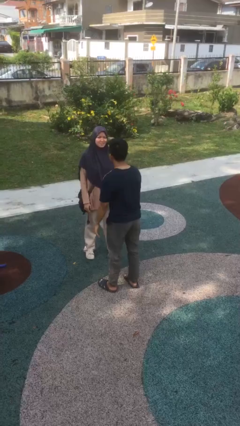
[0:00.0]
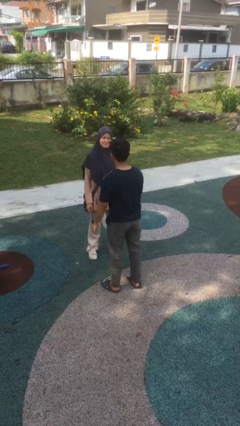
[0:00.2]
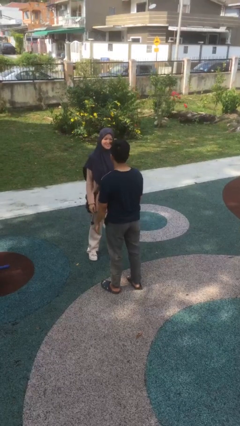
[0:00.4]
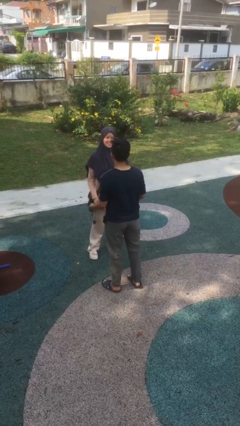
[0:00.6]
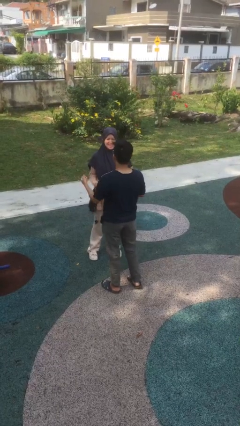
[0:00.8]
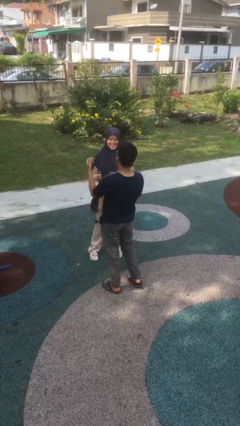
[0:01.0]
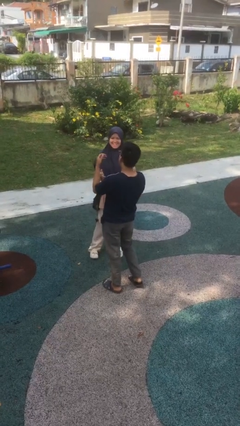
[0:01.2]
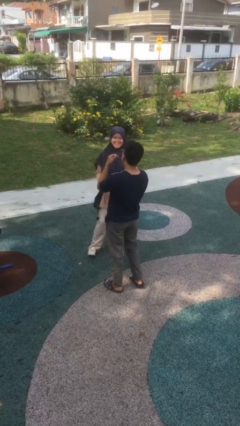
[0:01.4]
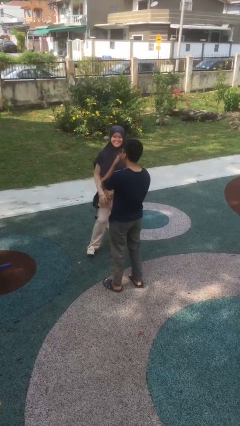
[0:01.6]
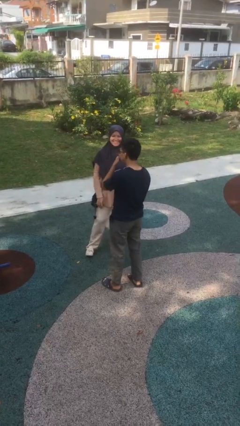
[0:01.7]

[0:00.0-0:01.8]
person laughs with person

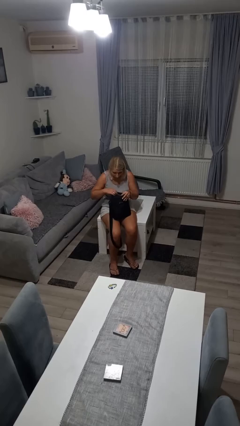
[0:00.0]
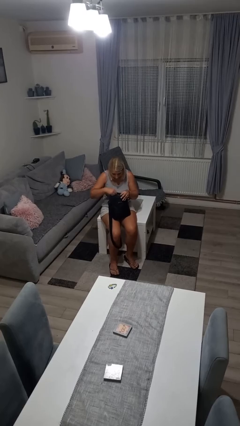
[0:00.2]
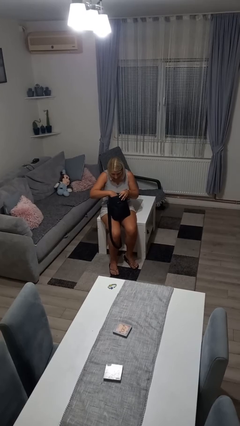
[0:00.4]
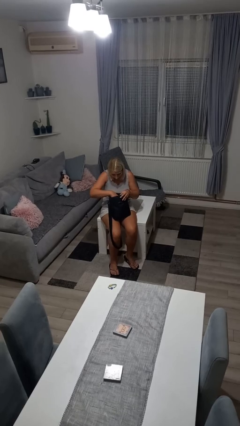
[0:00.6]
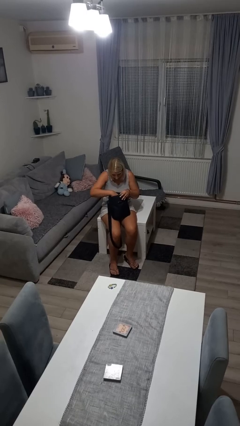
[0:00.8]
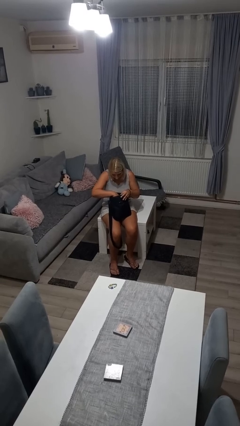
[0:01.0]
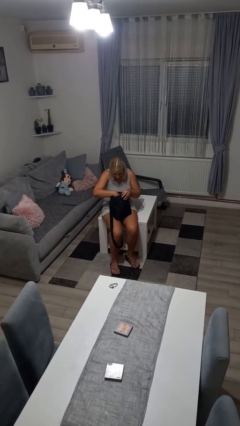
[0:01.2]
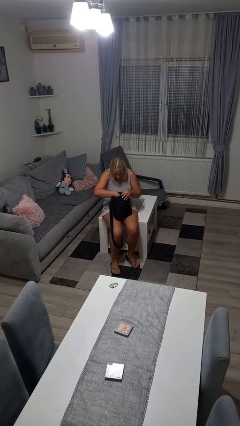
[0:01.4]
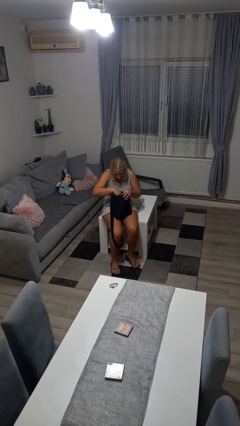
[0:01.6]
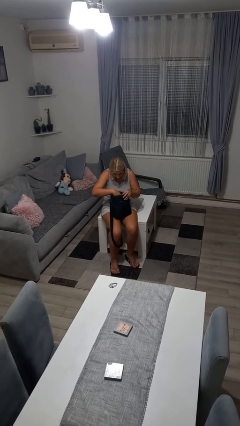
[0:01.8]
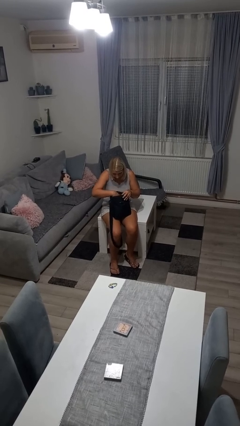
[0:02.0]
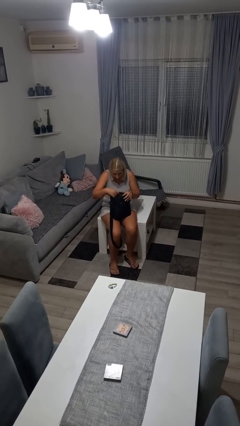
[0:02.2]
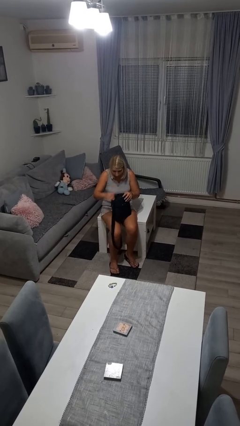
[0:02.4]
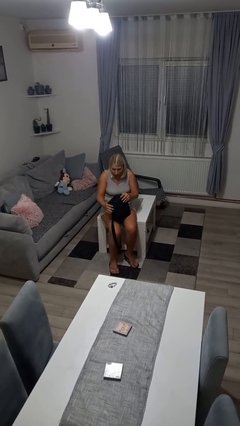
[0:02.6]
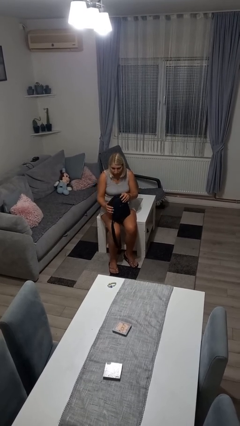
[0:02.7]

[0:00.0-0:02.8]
person searches in bag

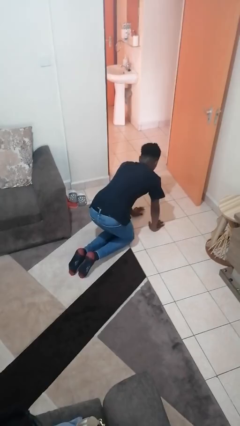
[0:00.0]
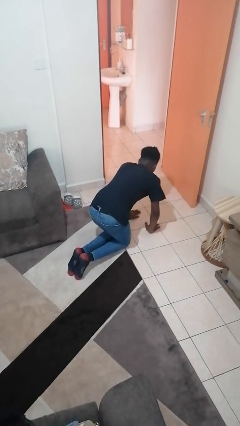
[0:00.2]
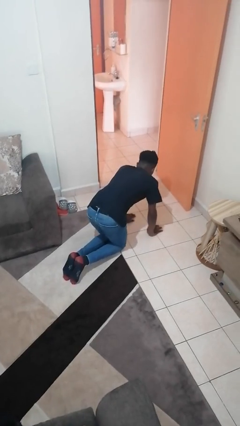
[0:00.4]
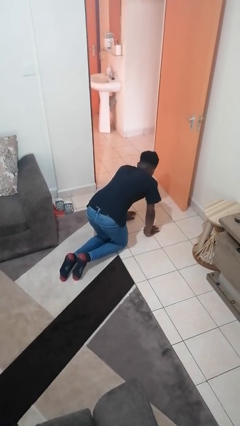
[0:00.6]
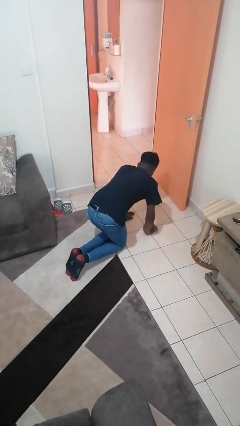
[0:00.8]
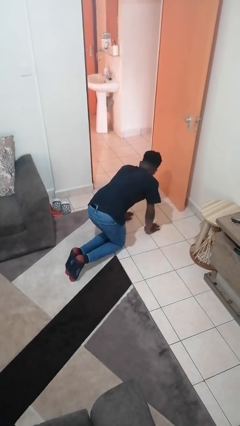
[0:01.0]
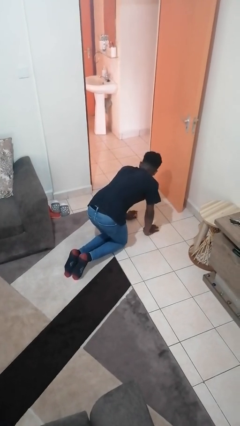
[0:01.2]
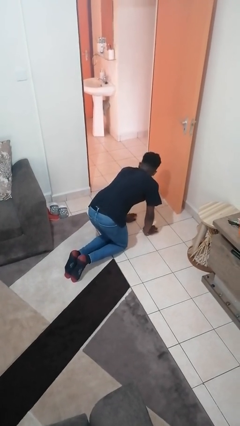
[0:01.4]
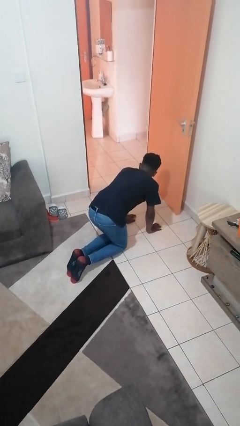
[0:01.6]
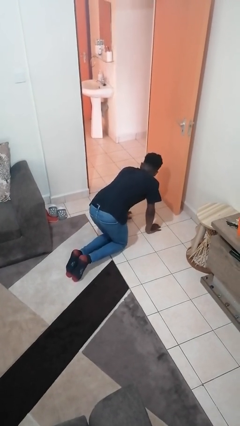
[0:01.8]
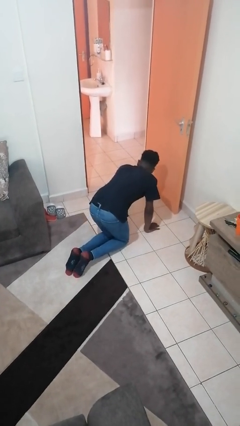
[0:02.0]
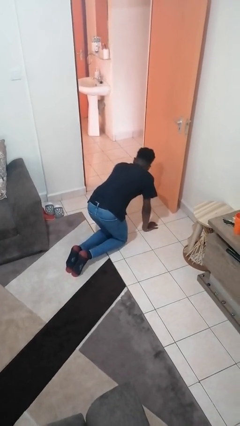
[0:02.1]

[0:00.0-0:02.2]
person crawls

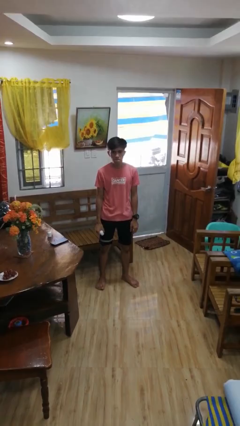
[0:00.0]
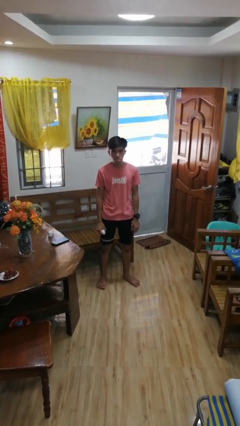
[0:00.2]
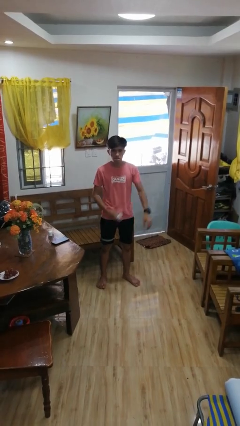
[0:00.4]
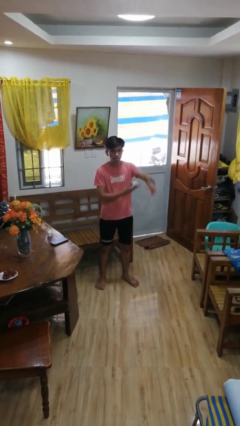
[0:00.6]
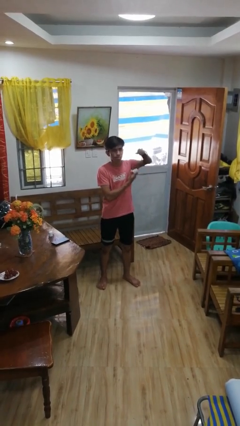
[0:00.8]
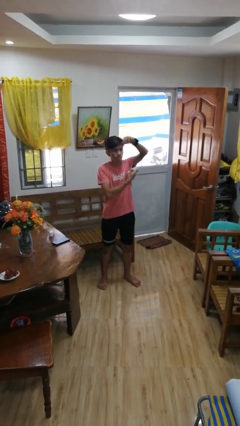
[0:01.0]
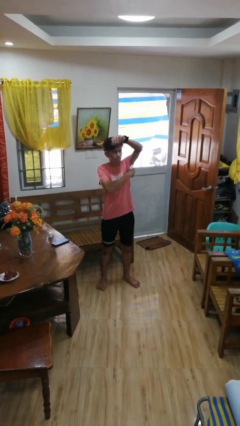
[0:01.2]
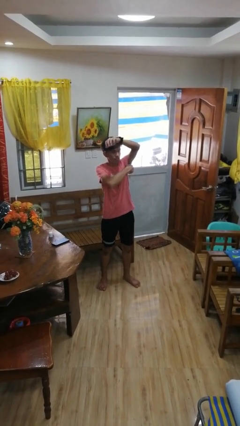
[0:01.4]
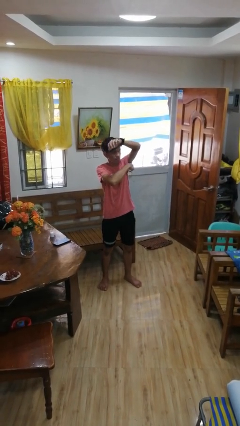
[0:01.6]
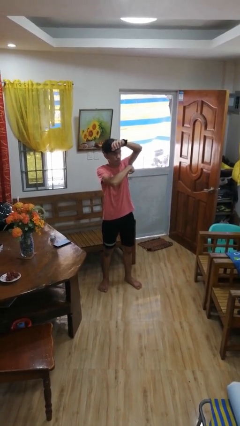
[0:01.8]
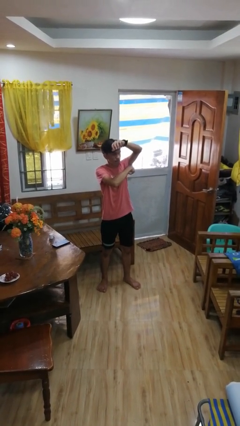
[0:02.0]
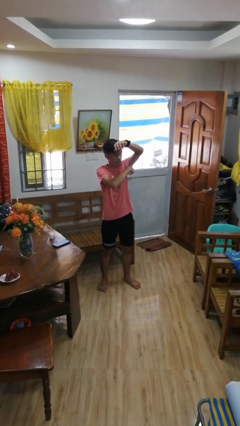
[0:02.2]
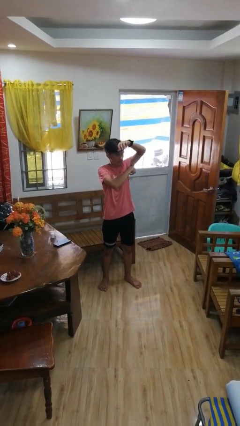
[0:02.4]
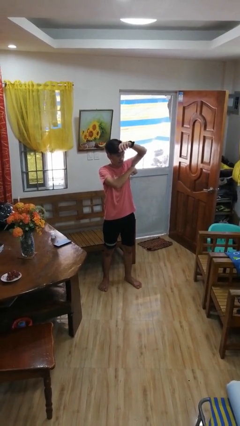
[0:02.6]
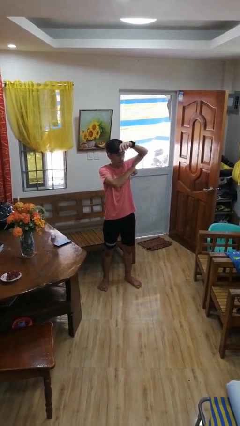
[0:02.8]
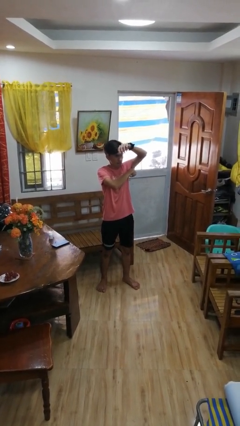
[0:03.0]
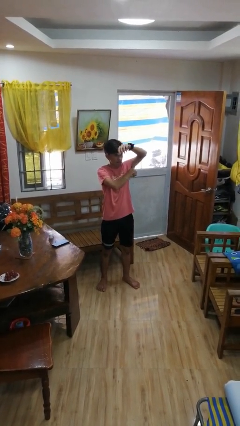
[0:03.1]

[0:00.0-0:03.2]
person applies deodorant

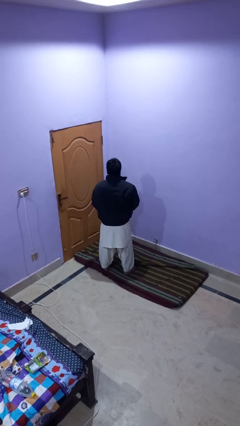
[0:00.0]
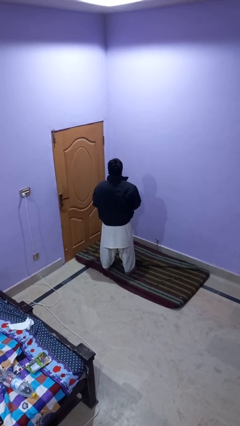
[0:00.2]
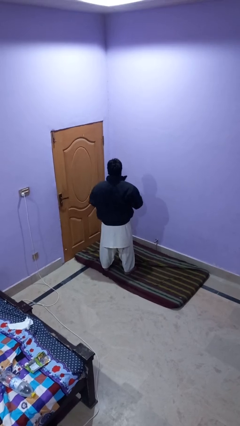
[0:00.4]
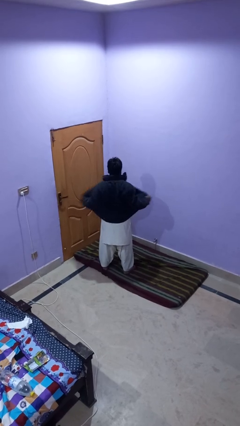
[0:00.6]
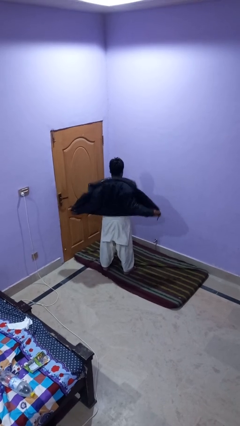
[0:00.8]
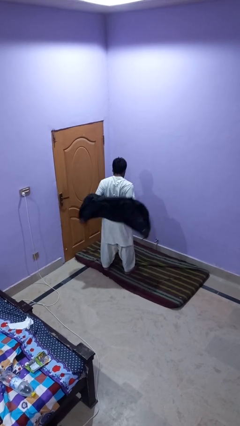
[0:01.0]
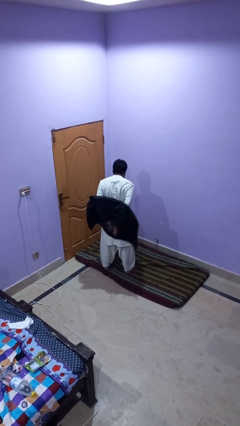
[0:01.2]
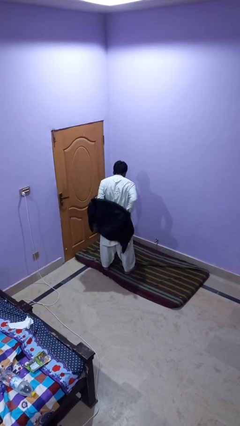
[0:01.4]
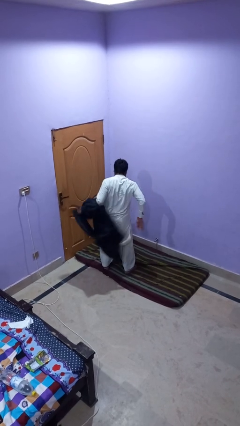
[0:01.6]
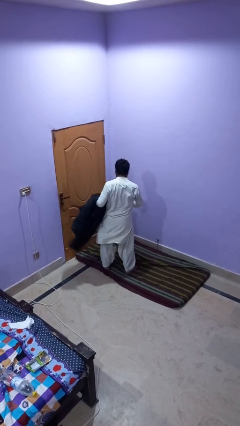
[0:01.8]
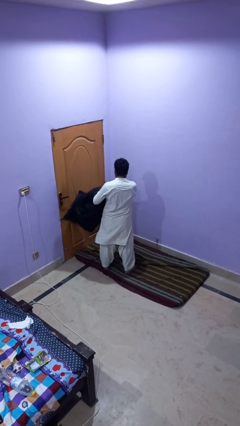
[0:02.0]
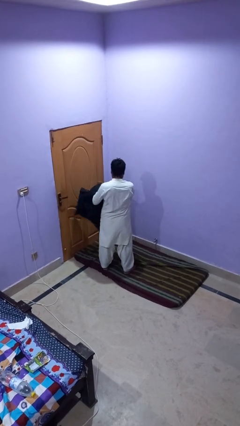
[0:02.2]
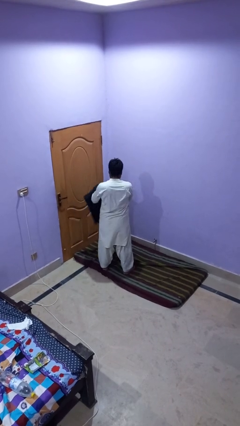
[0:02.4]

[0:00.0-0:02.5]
person takes off jacket

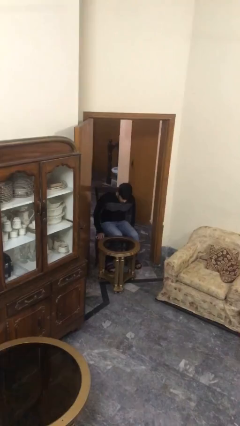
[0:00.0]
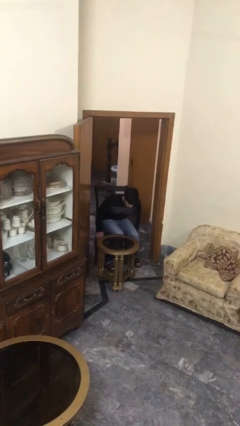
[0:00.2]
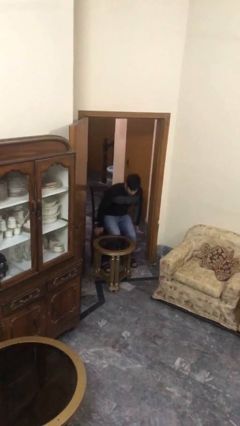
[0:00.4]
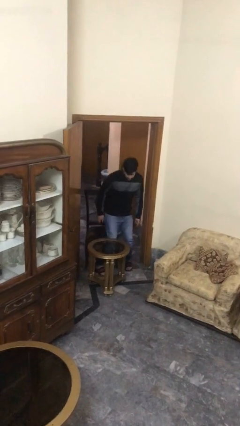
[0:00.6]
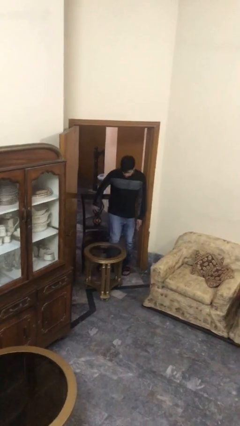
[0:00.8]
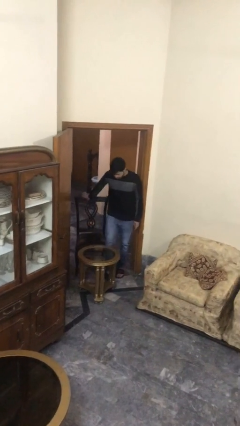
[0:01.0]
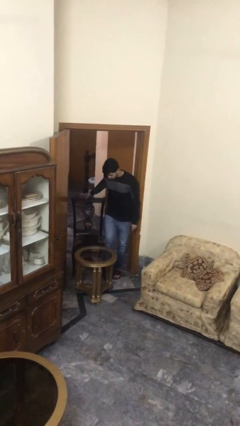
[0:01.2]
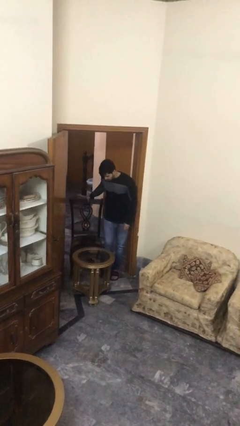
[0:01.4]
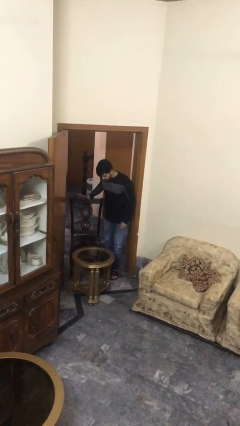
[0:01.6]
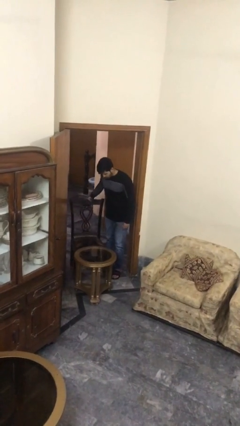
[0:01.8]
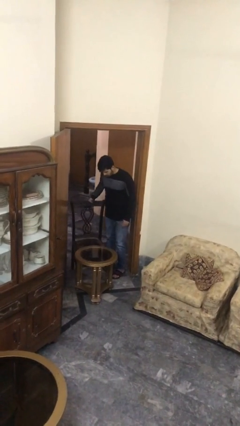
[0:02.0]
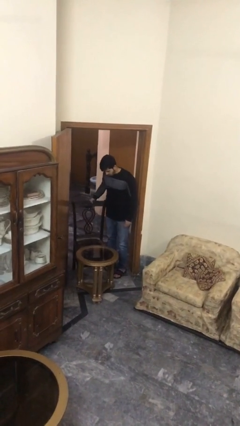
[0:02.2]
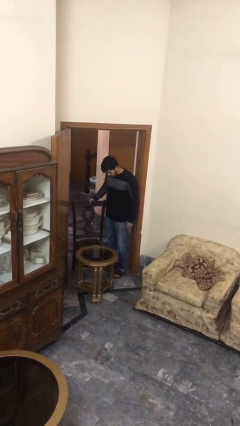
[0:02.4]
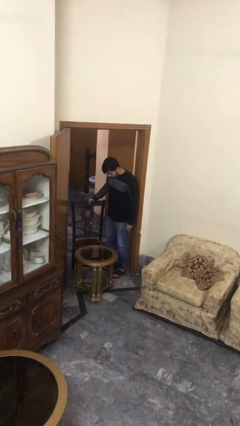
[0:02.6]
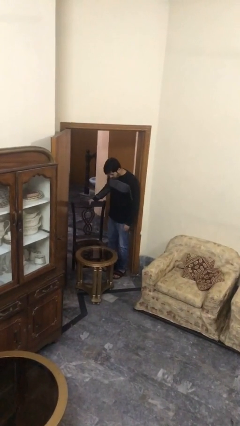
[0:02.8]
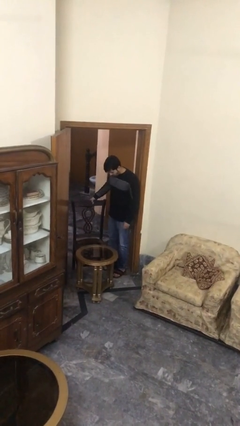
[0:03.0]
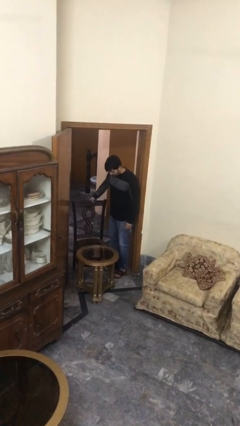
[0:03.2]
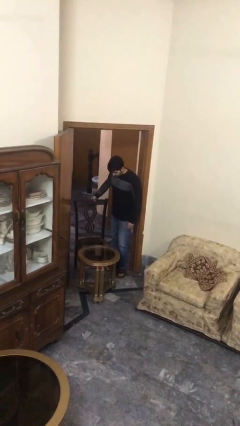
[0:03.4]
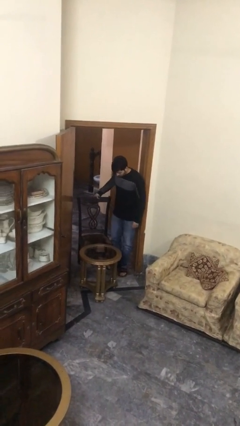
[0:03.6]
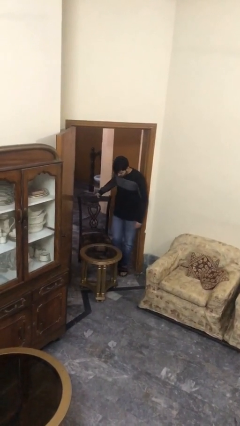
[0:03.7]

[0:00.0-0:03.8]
person stands up

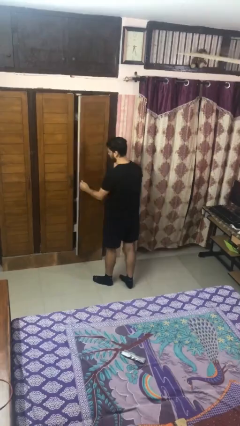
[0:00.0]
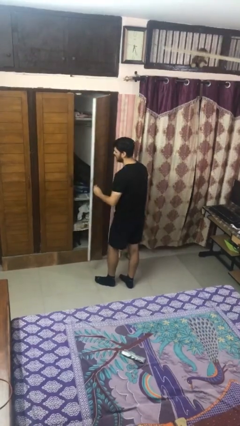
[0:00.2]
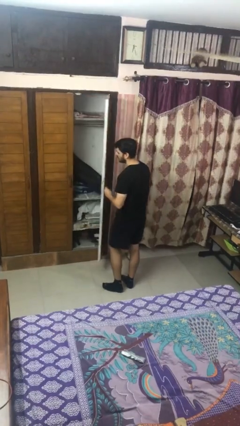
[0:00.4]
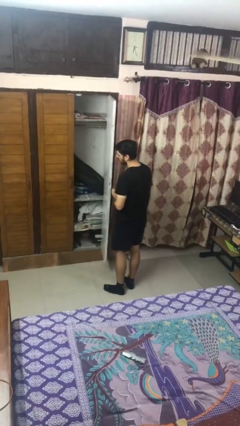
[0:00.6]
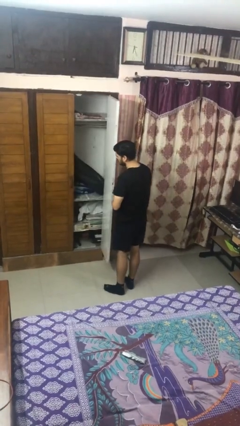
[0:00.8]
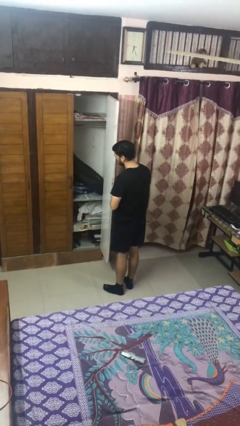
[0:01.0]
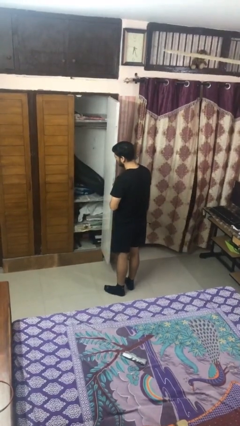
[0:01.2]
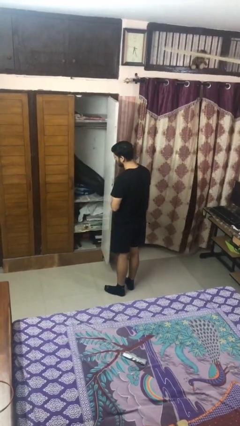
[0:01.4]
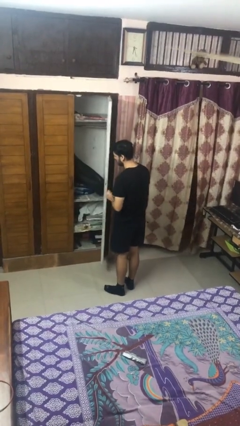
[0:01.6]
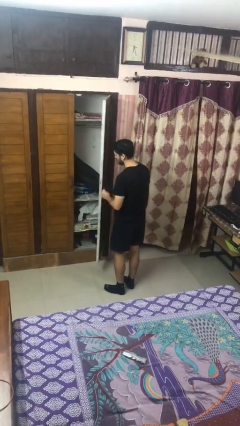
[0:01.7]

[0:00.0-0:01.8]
person opens facility door
